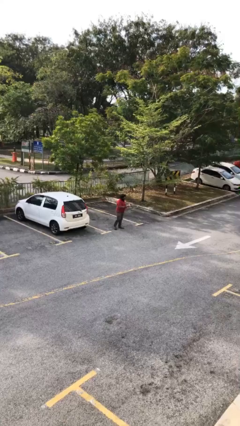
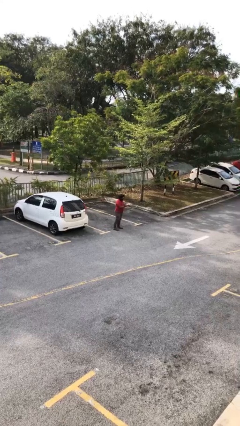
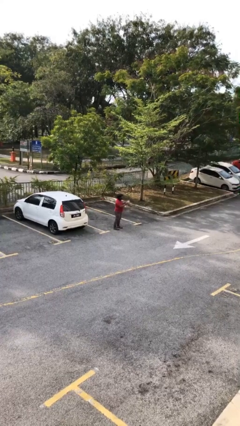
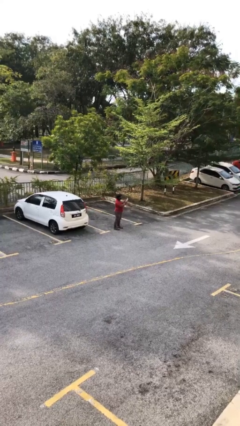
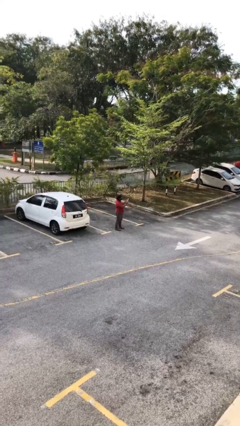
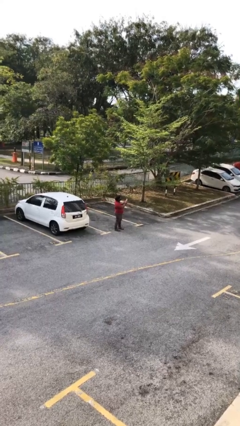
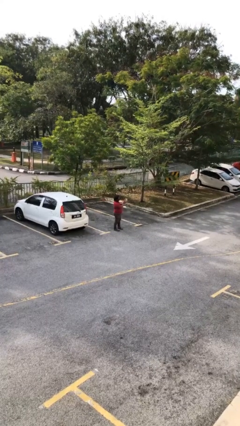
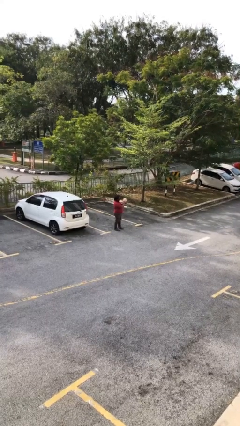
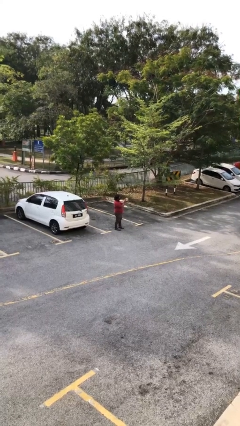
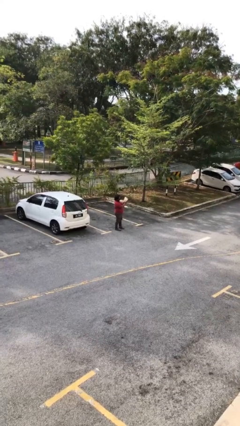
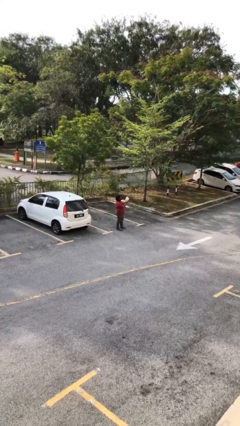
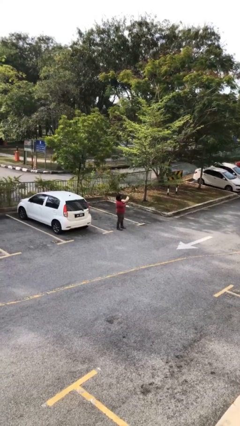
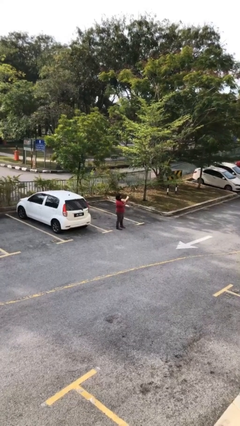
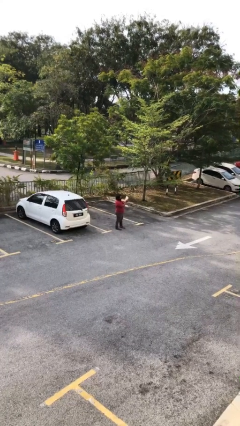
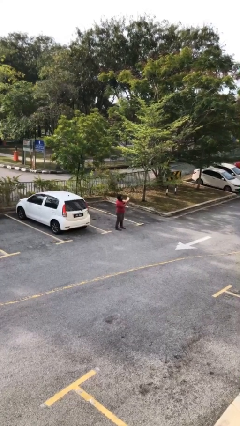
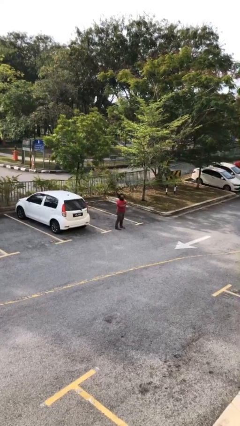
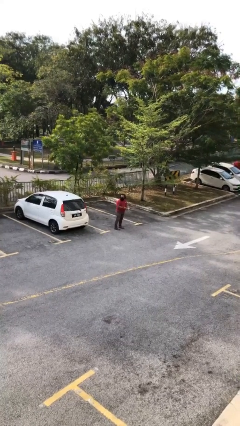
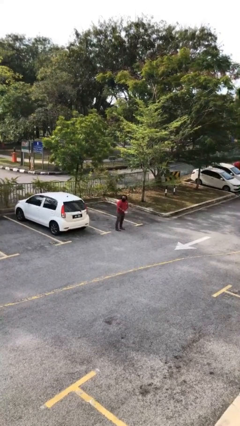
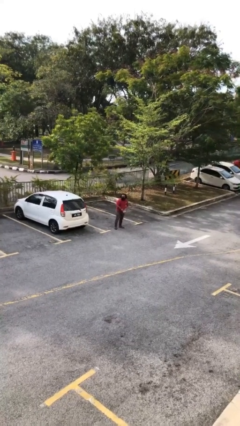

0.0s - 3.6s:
person reads document

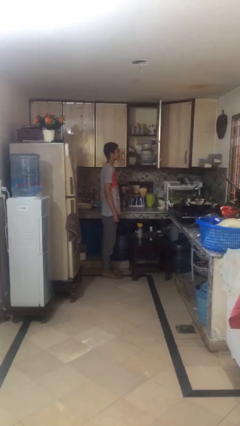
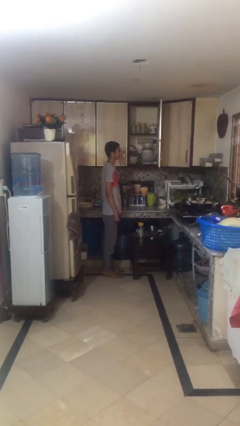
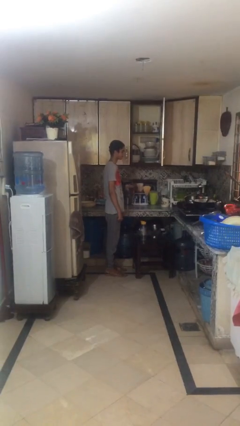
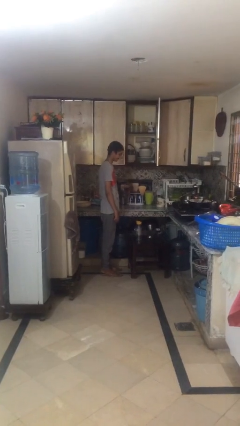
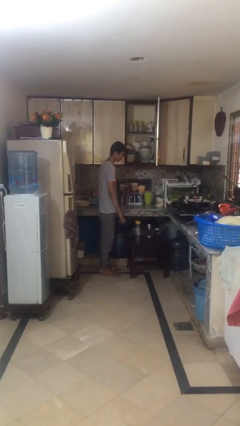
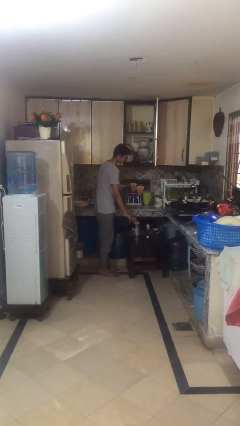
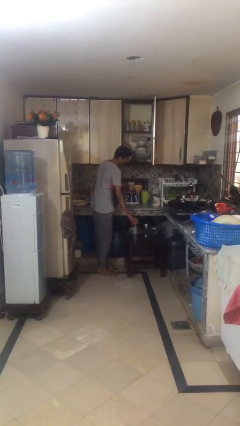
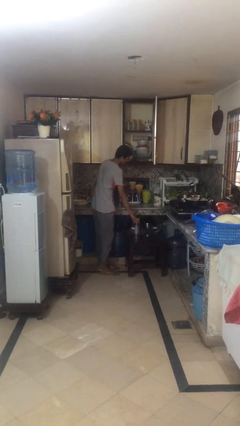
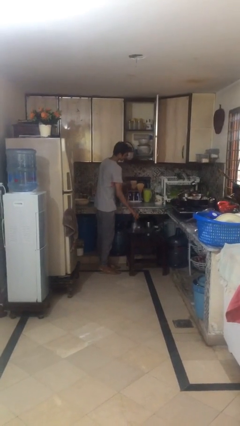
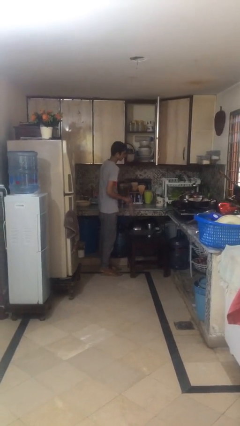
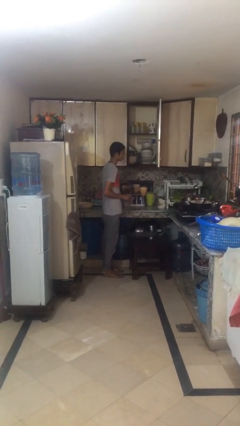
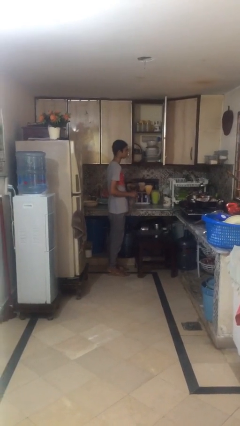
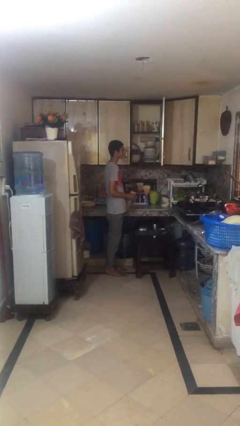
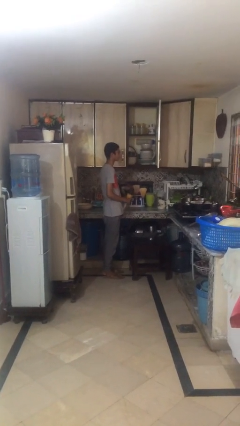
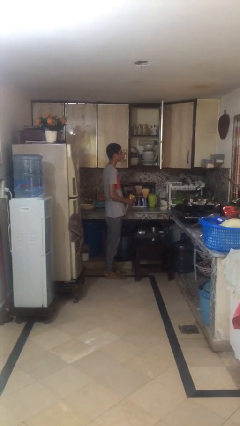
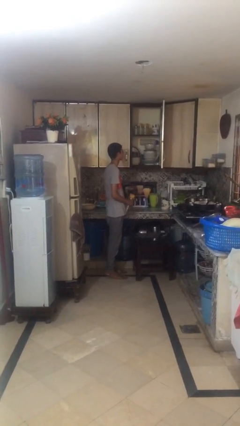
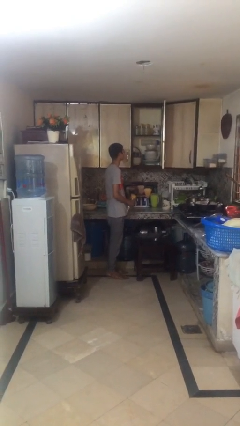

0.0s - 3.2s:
person picks up object from table

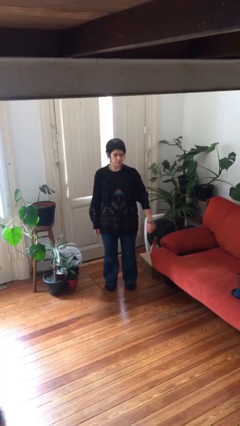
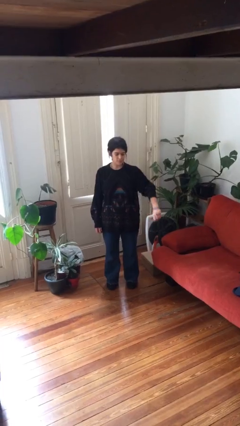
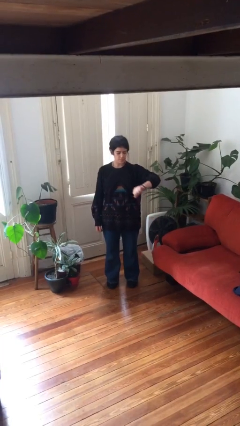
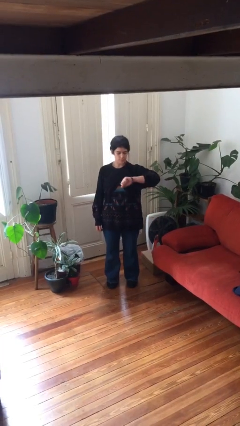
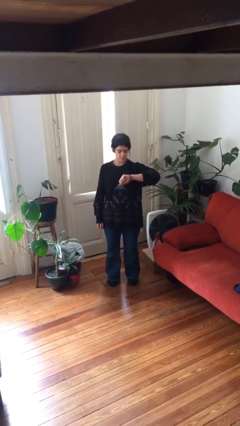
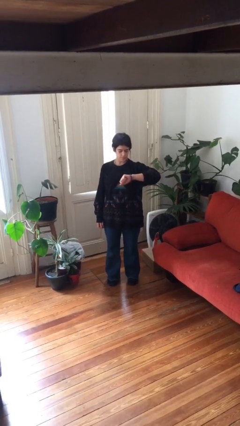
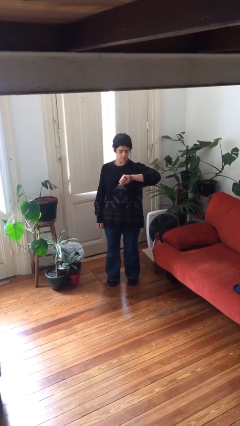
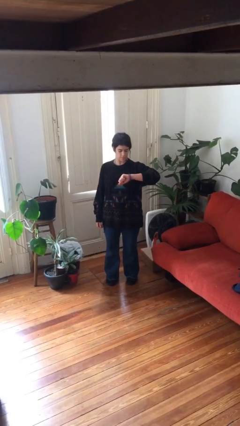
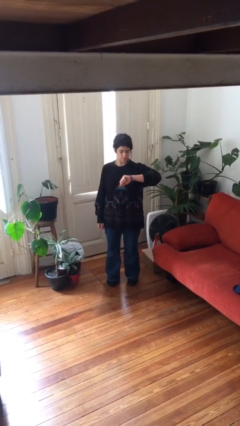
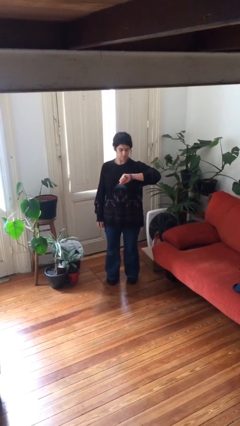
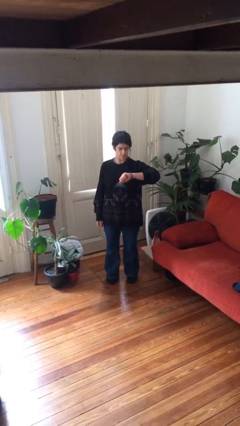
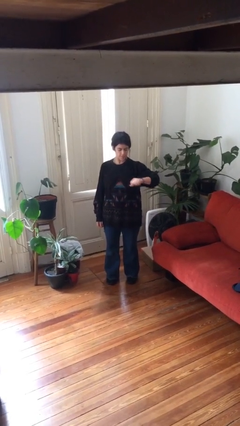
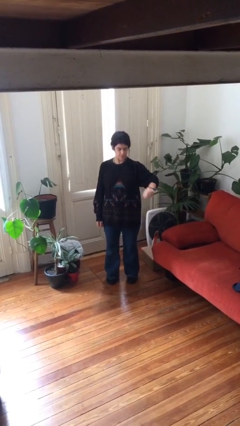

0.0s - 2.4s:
person looks at wristwatch

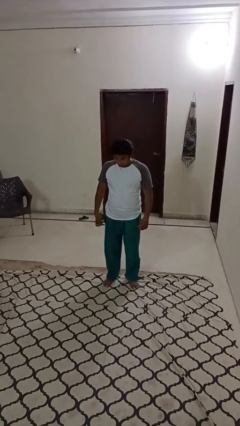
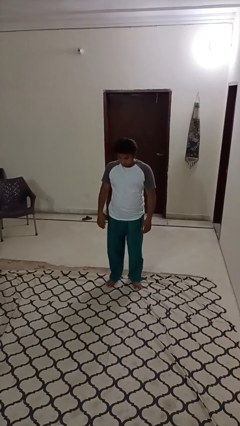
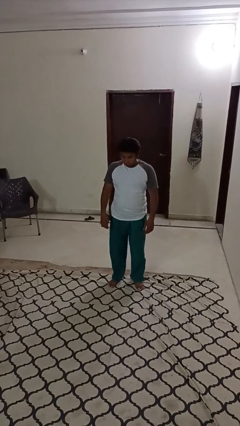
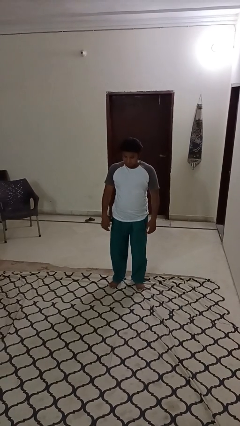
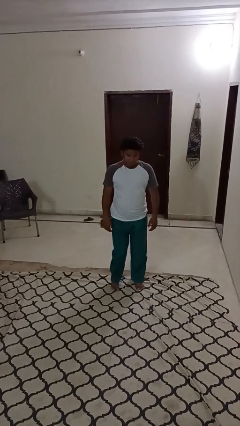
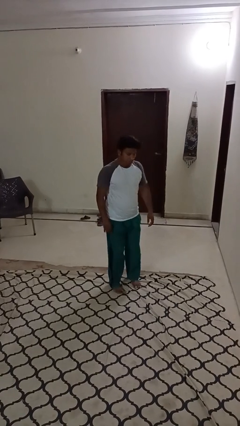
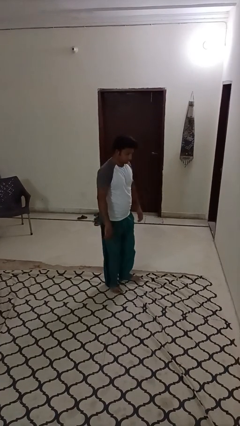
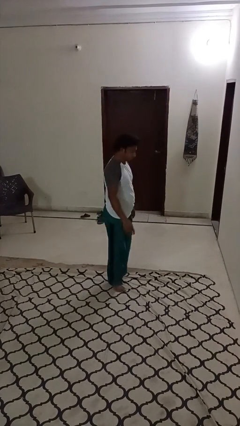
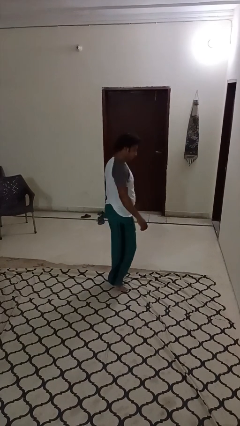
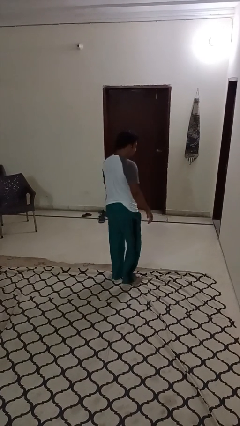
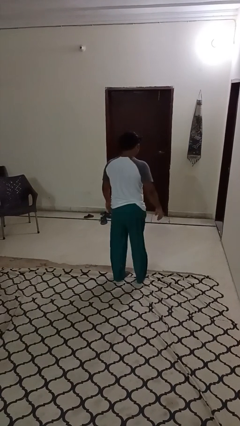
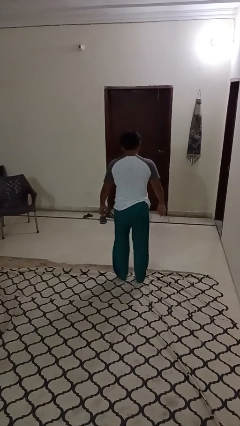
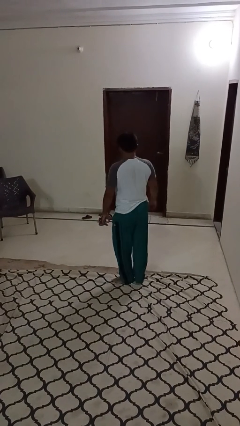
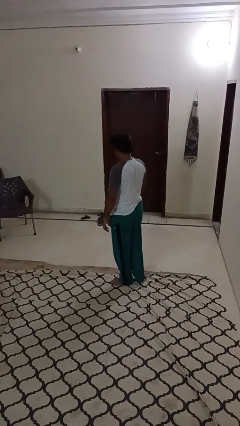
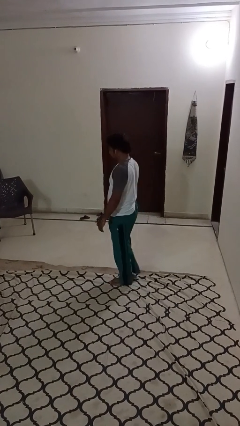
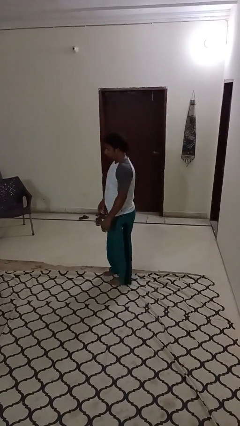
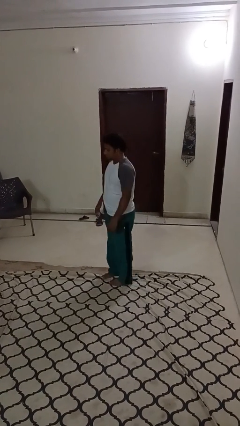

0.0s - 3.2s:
person twirls

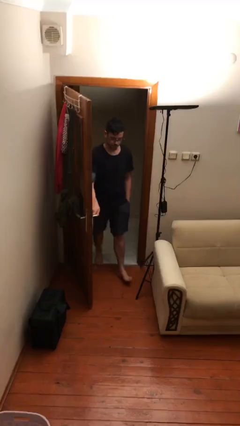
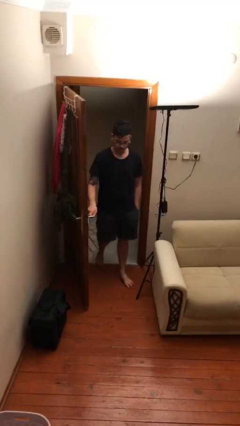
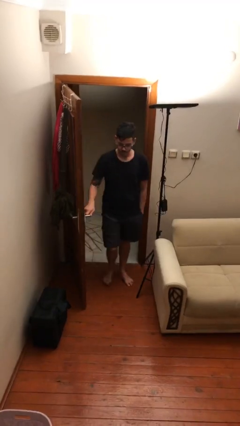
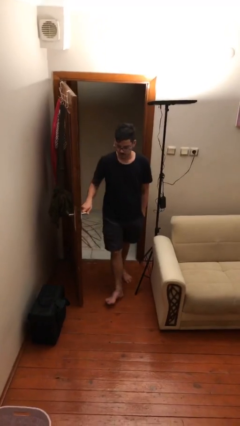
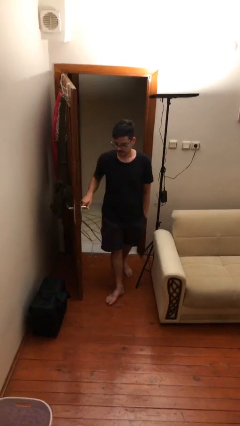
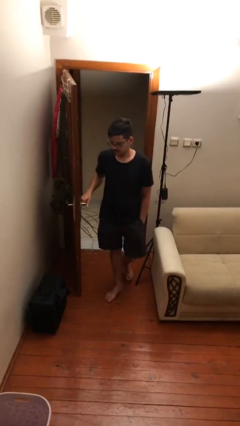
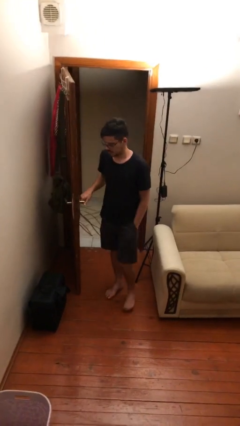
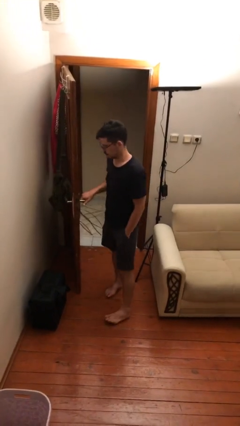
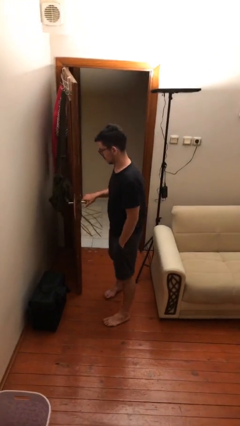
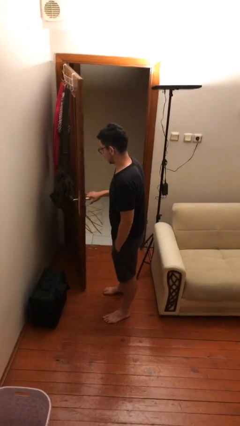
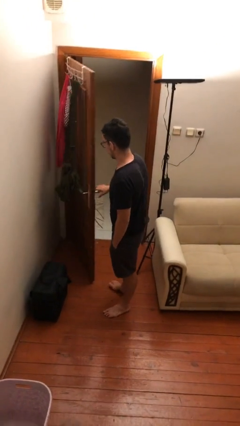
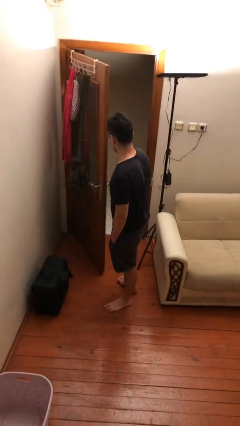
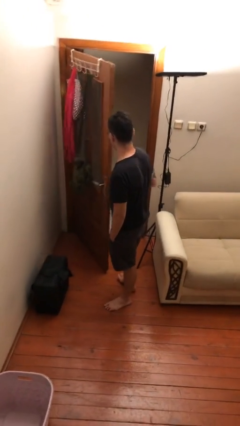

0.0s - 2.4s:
person enters scene through structure

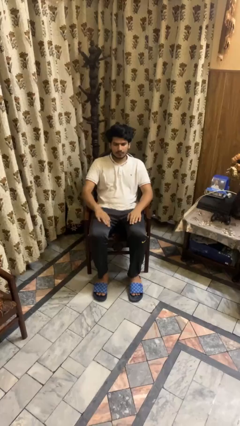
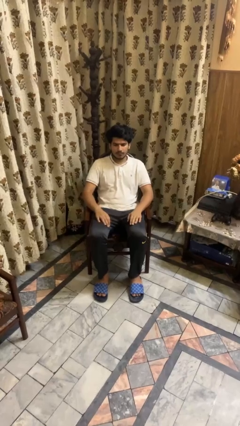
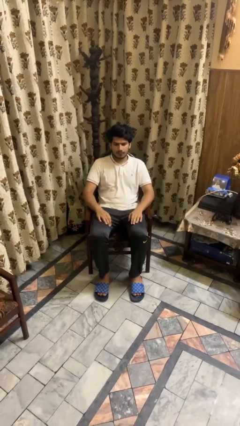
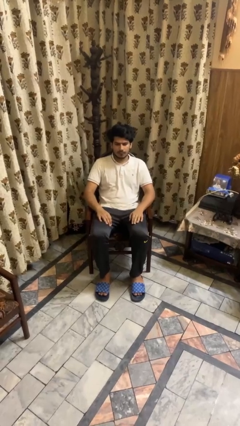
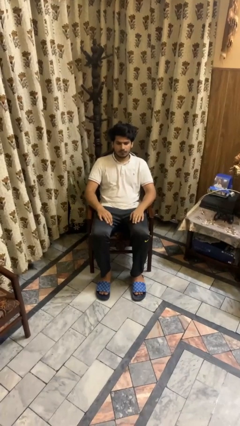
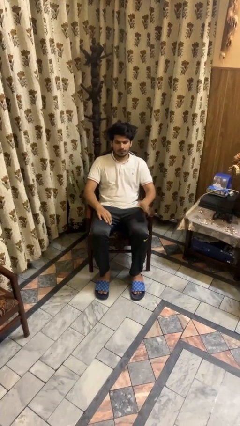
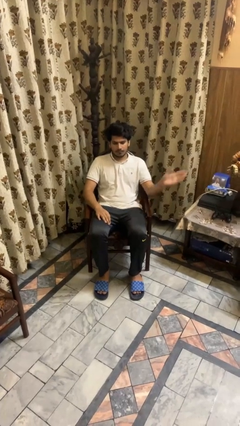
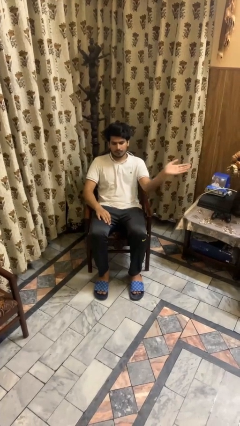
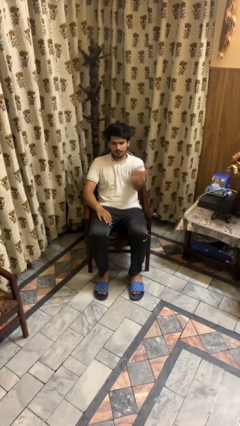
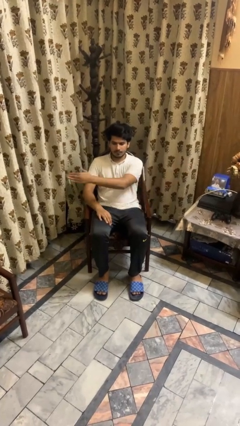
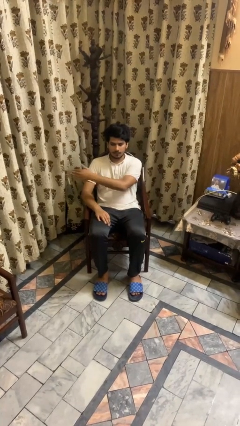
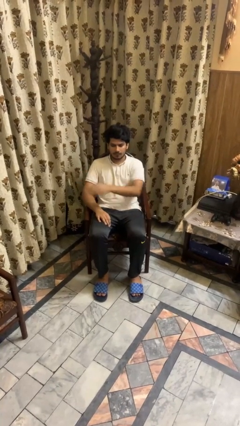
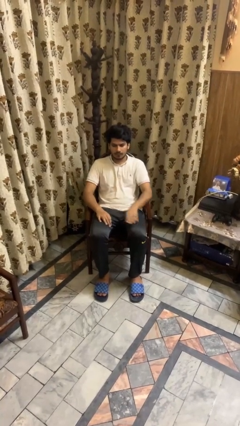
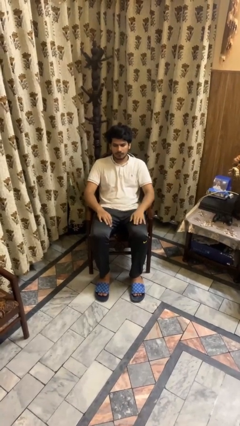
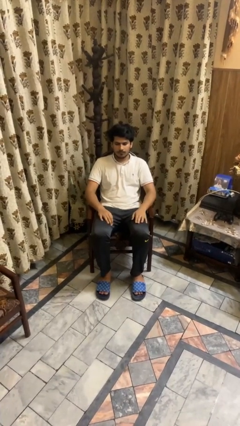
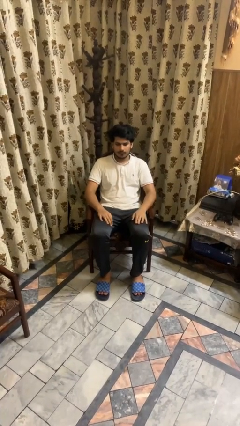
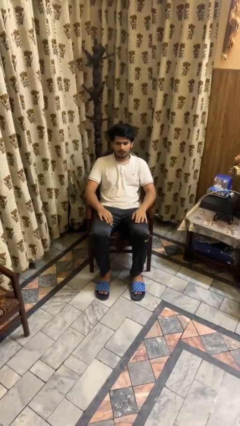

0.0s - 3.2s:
person gestures swipe right
